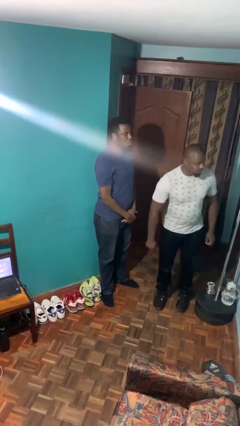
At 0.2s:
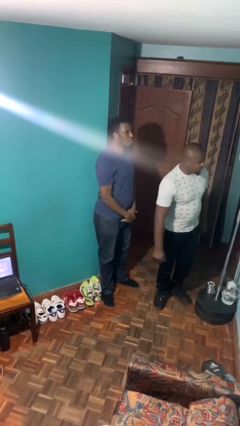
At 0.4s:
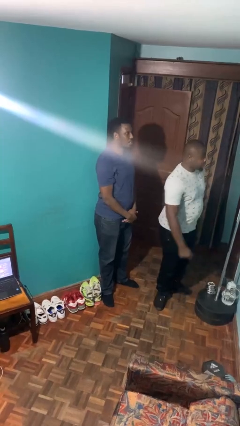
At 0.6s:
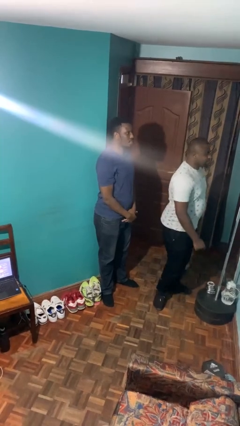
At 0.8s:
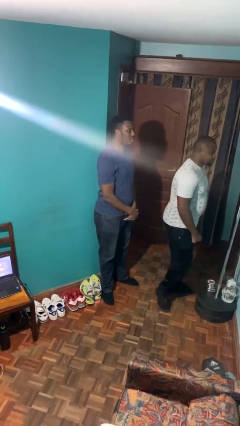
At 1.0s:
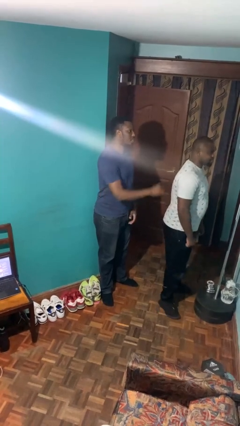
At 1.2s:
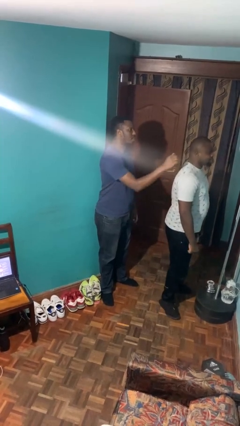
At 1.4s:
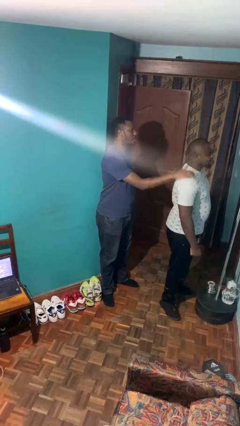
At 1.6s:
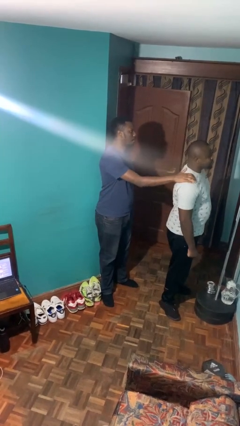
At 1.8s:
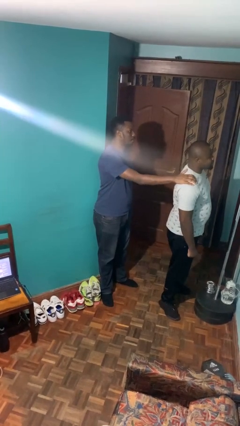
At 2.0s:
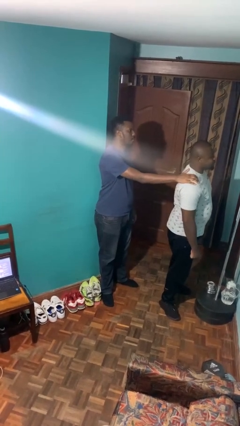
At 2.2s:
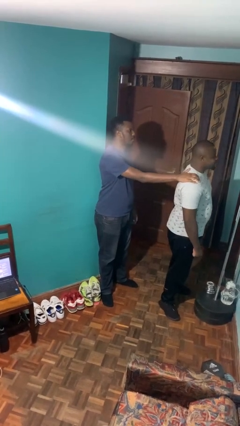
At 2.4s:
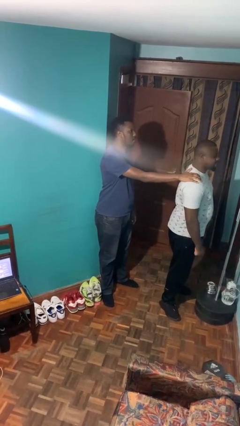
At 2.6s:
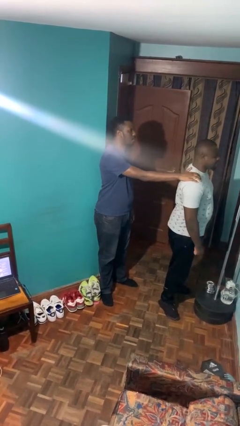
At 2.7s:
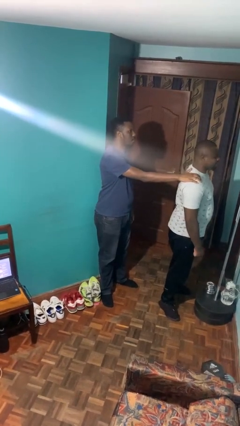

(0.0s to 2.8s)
person grabs person by shoulder

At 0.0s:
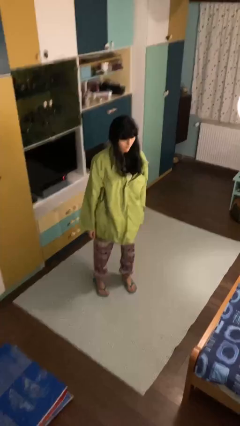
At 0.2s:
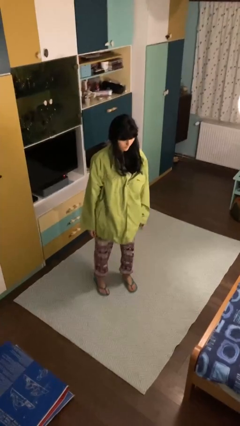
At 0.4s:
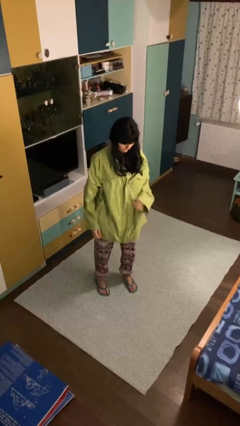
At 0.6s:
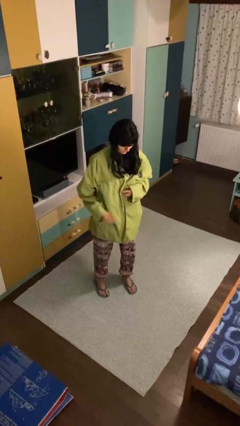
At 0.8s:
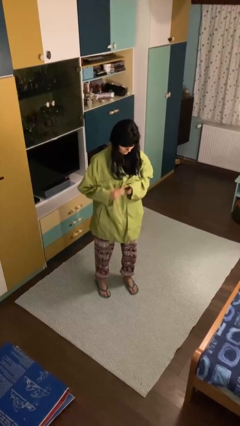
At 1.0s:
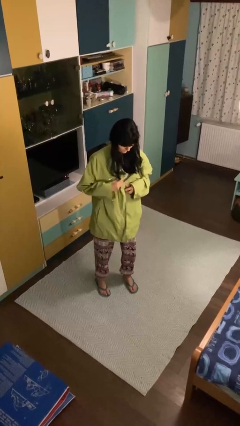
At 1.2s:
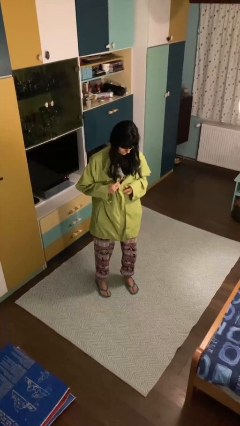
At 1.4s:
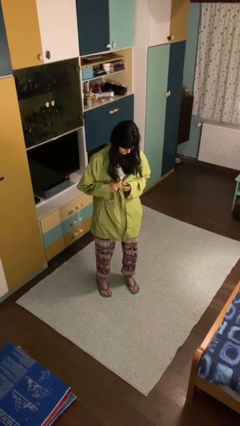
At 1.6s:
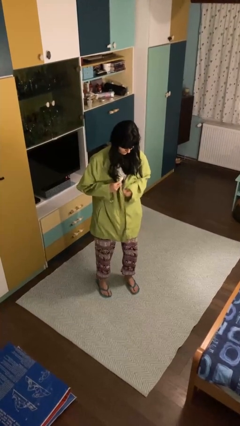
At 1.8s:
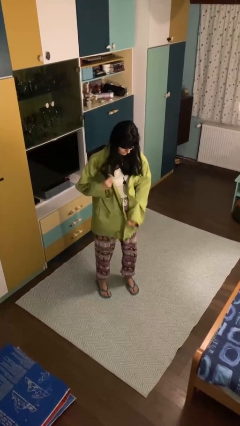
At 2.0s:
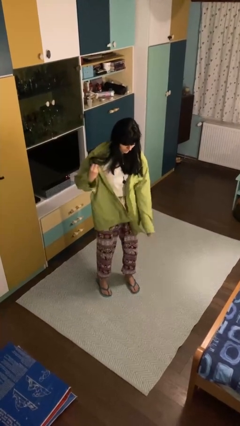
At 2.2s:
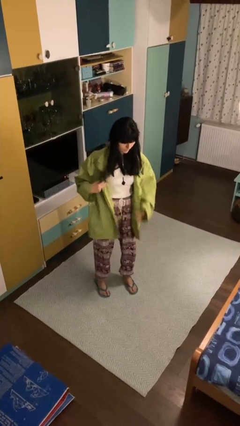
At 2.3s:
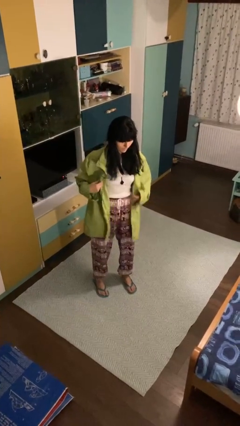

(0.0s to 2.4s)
person unzips jacket

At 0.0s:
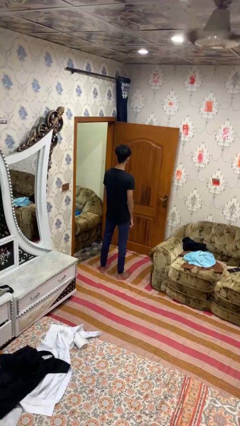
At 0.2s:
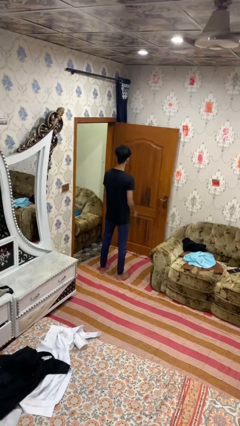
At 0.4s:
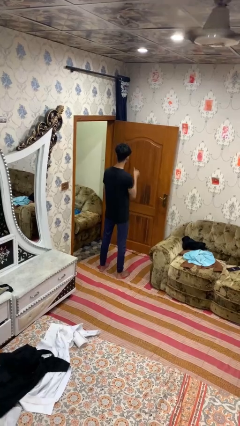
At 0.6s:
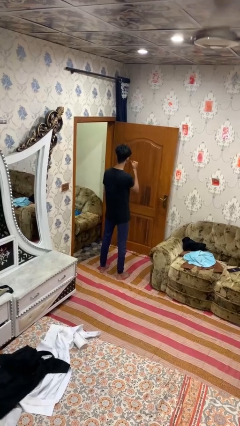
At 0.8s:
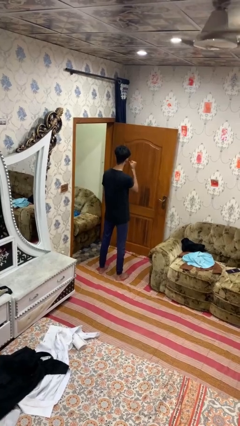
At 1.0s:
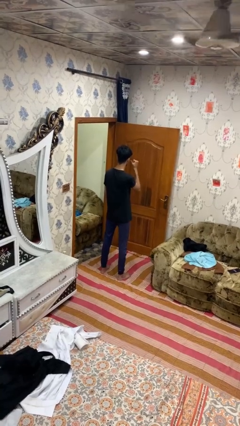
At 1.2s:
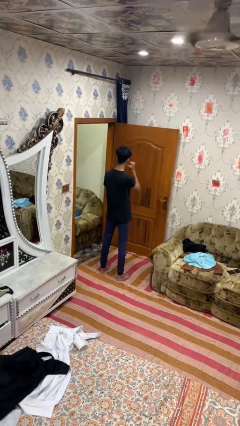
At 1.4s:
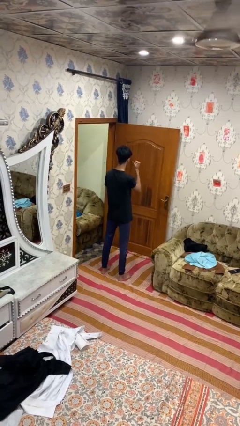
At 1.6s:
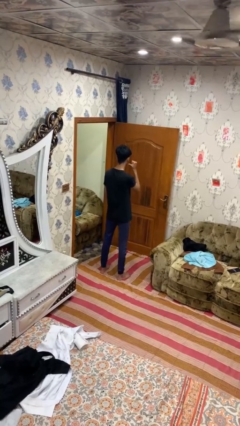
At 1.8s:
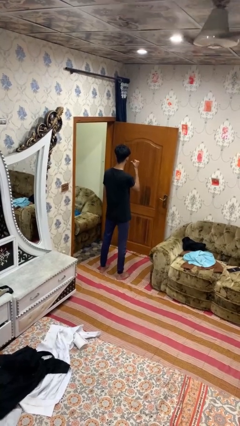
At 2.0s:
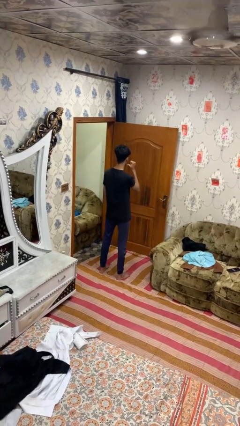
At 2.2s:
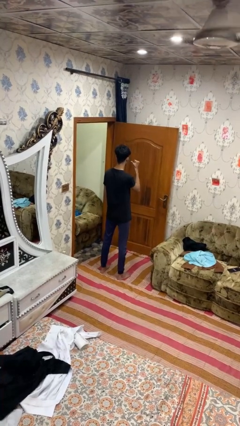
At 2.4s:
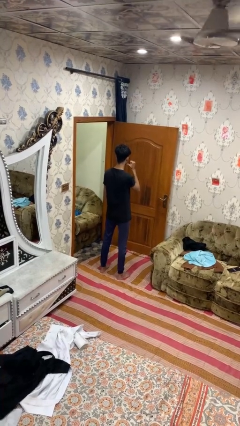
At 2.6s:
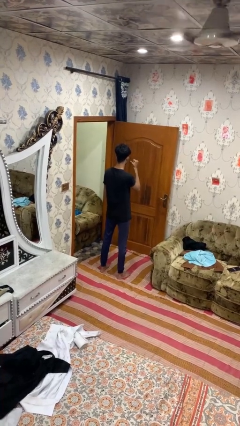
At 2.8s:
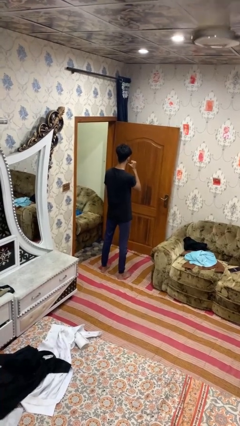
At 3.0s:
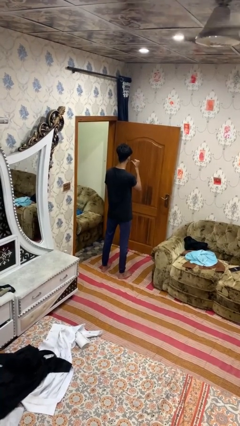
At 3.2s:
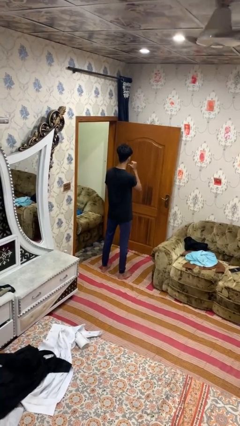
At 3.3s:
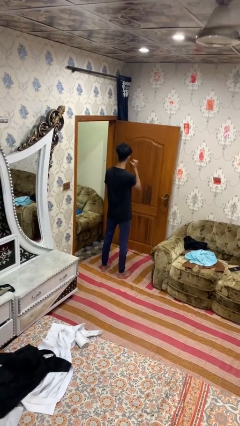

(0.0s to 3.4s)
person gestures behind me

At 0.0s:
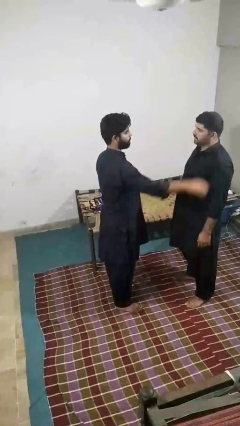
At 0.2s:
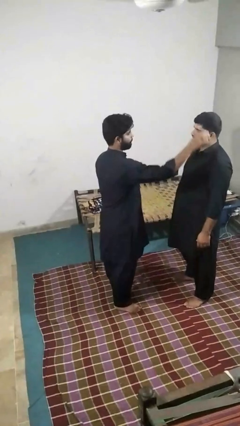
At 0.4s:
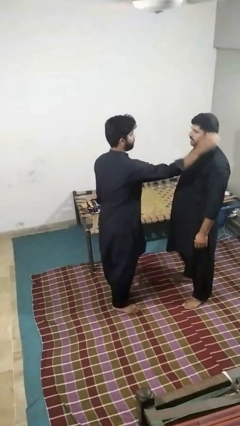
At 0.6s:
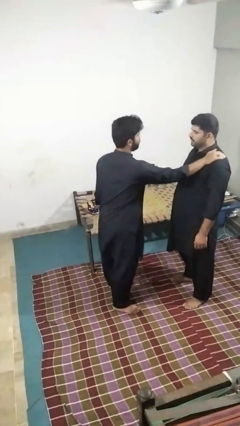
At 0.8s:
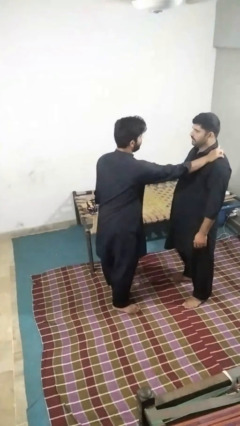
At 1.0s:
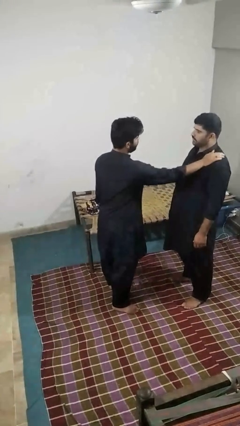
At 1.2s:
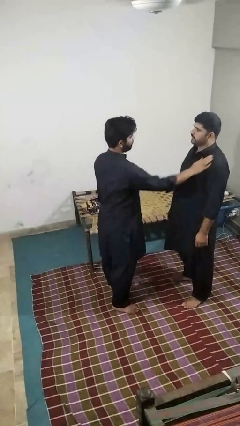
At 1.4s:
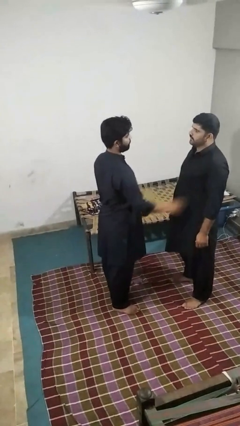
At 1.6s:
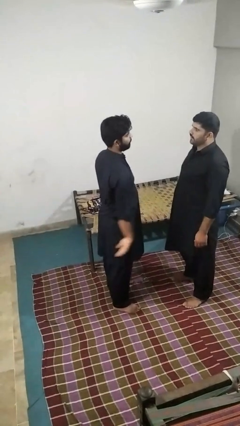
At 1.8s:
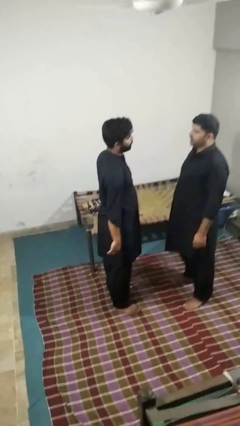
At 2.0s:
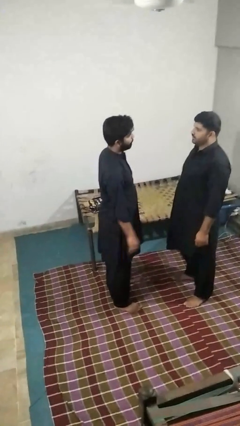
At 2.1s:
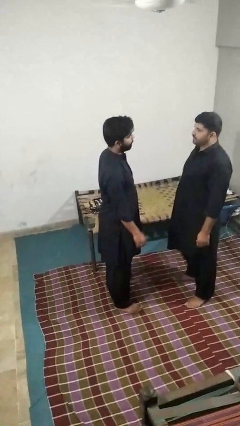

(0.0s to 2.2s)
person pounds shoulders of person

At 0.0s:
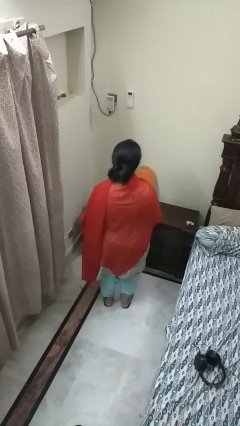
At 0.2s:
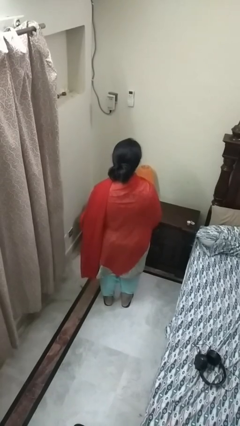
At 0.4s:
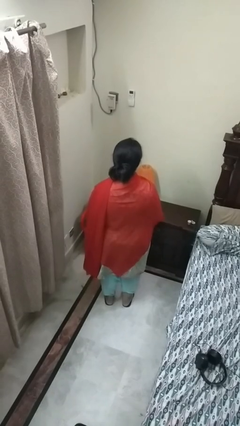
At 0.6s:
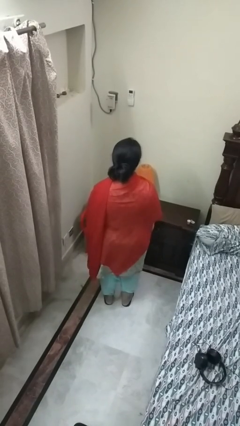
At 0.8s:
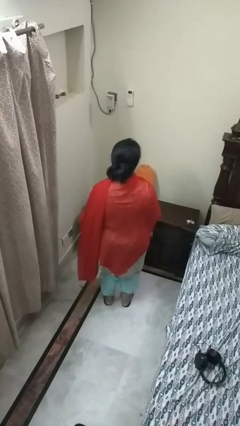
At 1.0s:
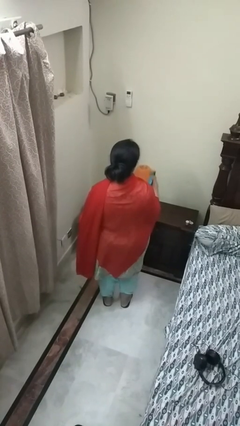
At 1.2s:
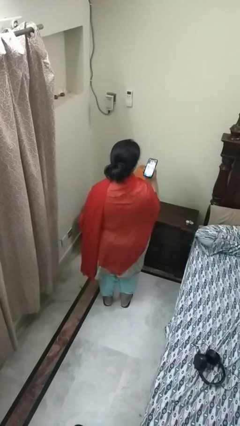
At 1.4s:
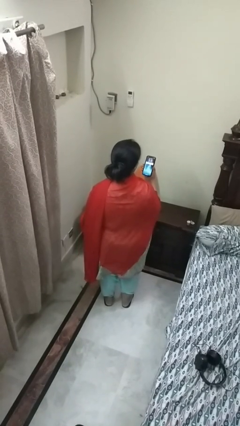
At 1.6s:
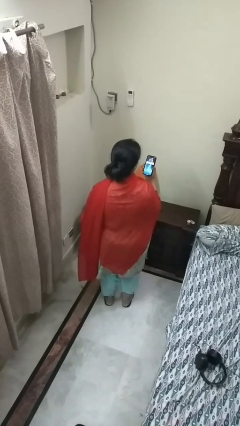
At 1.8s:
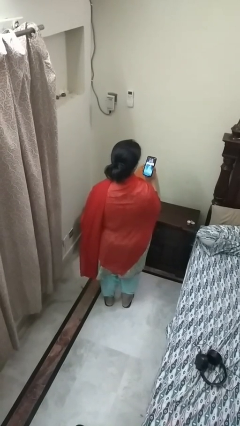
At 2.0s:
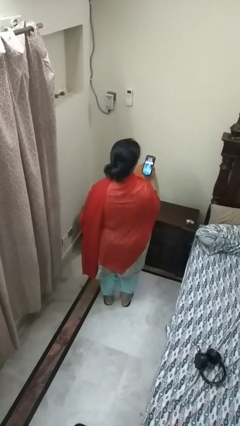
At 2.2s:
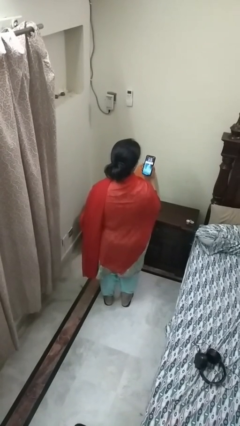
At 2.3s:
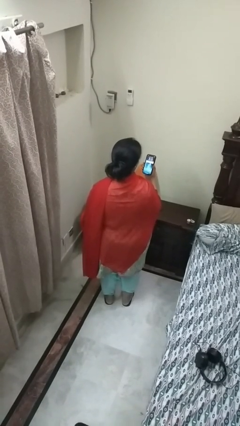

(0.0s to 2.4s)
person takes phone from pocket

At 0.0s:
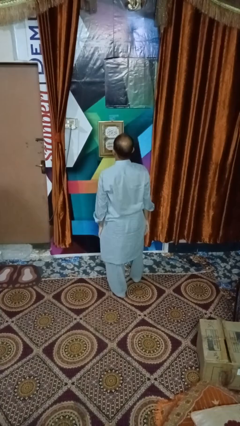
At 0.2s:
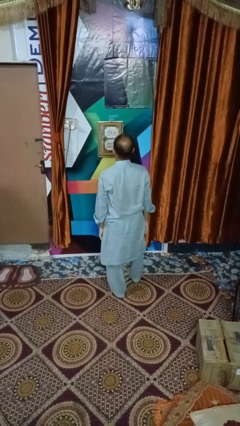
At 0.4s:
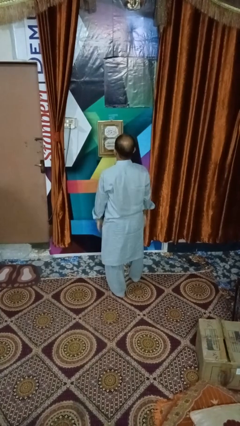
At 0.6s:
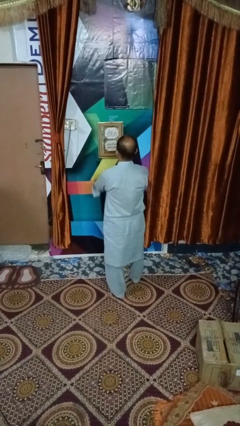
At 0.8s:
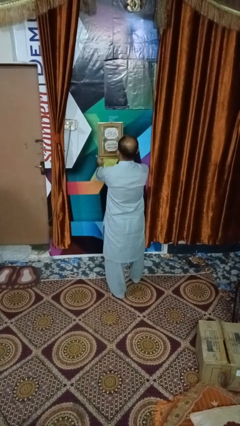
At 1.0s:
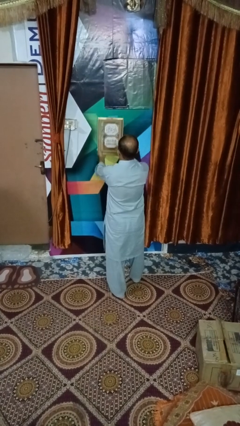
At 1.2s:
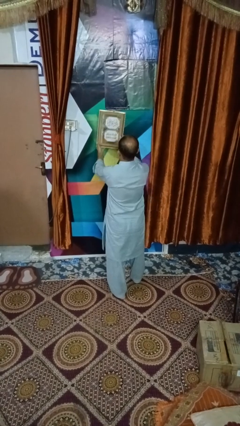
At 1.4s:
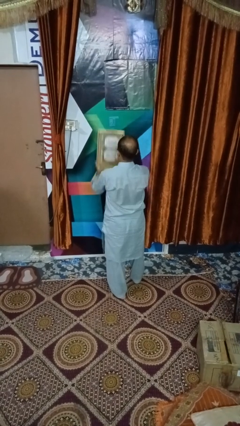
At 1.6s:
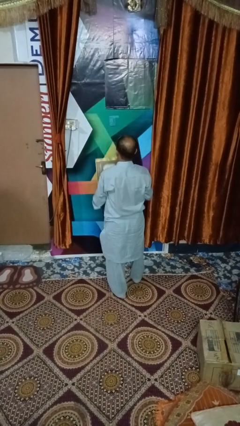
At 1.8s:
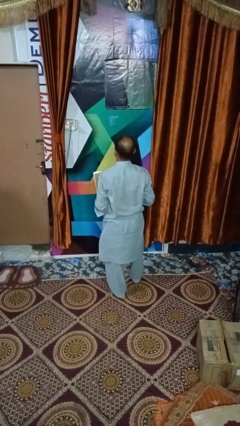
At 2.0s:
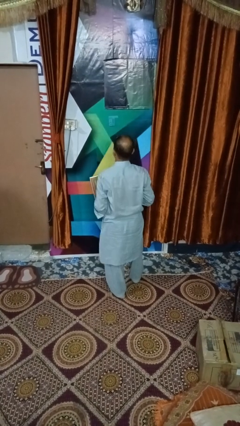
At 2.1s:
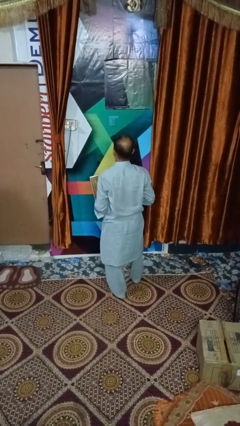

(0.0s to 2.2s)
person takes down picture frame

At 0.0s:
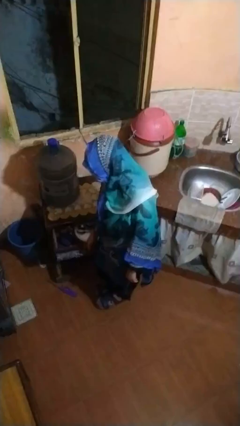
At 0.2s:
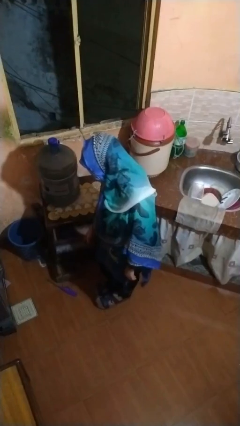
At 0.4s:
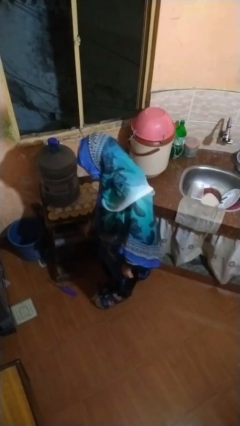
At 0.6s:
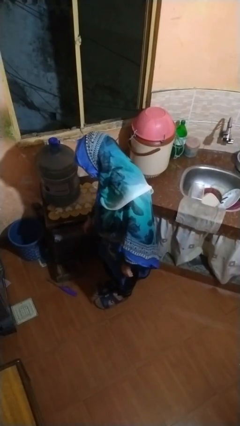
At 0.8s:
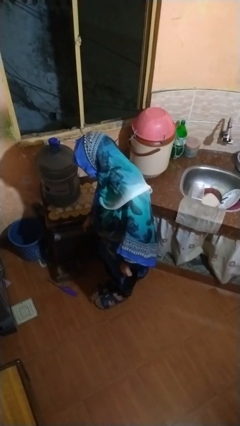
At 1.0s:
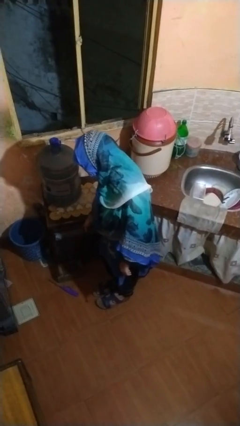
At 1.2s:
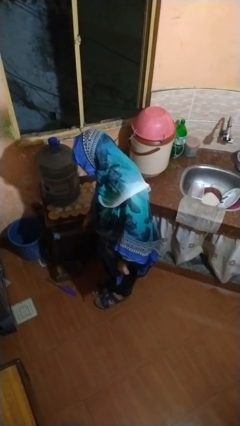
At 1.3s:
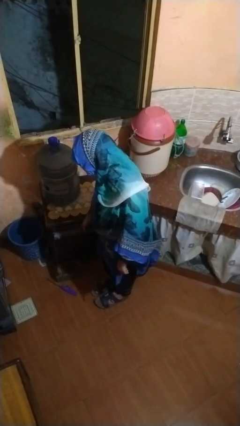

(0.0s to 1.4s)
person closes kitchen drawer

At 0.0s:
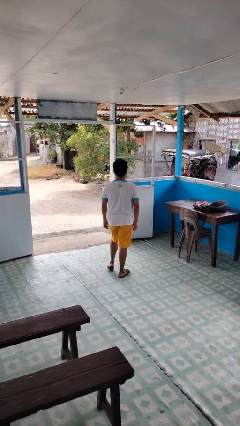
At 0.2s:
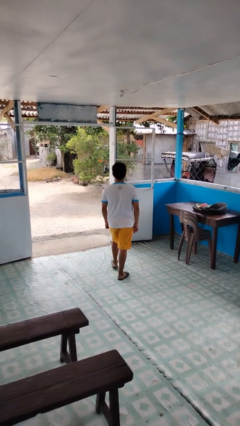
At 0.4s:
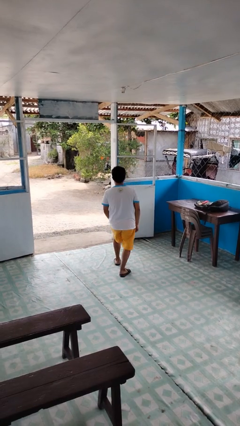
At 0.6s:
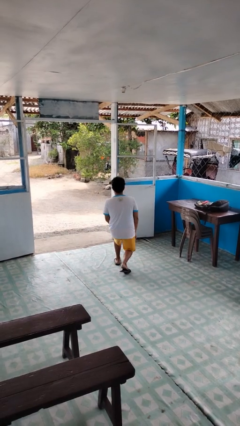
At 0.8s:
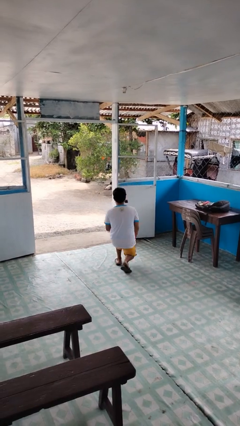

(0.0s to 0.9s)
person kneels
